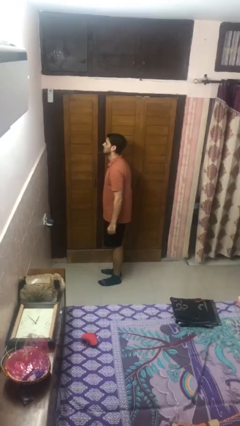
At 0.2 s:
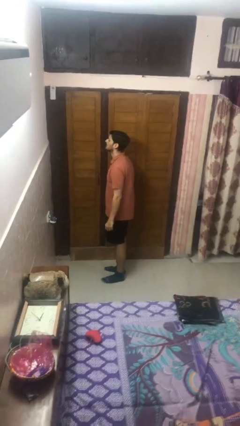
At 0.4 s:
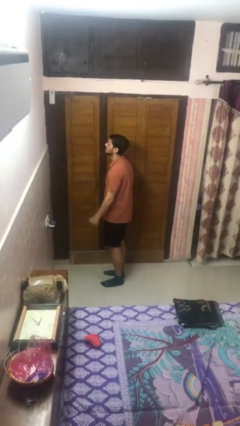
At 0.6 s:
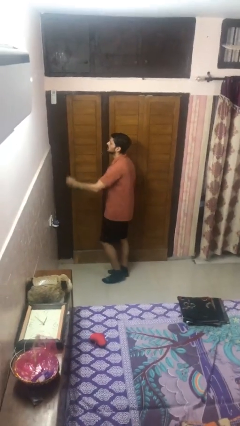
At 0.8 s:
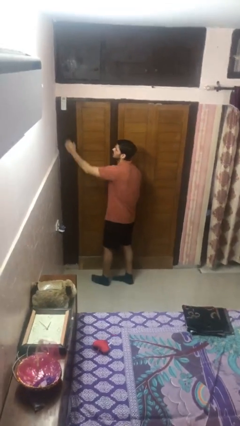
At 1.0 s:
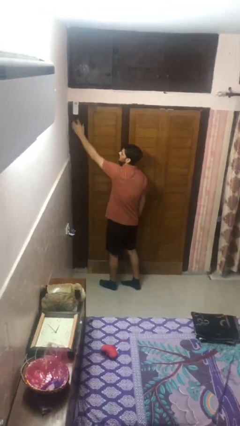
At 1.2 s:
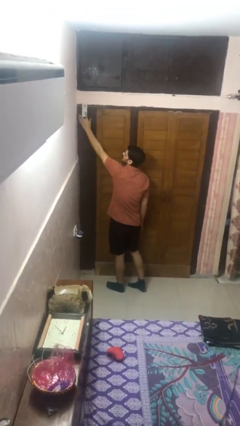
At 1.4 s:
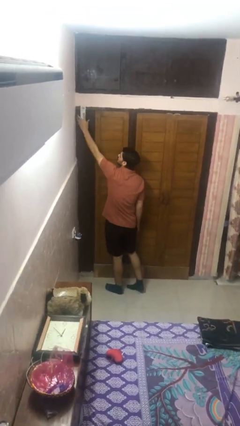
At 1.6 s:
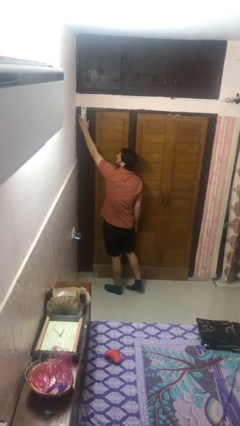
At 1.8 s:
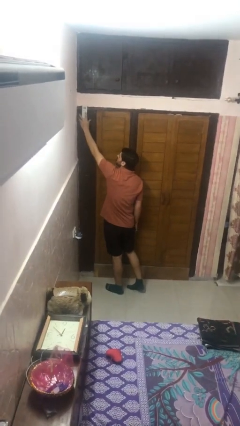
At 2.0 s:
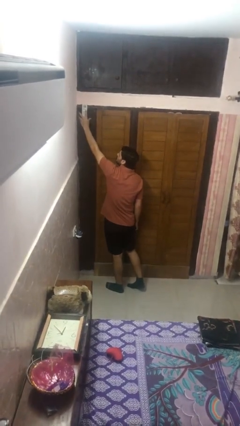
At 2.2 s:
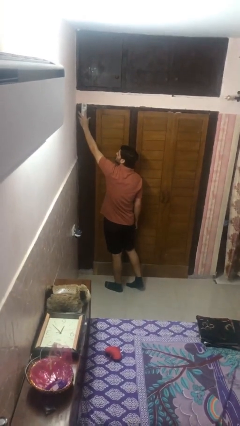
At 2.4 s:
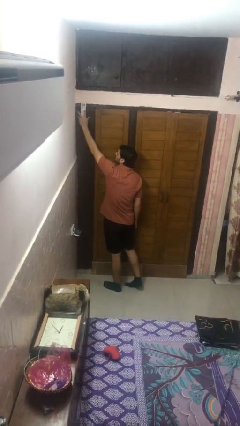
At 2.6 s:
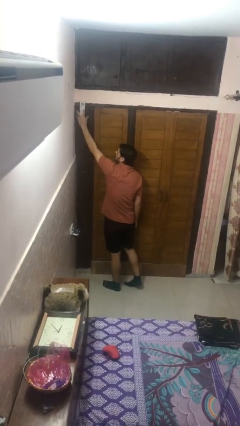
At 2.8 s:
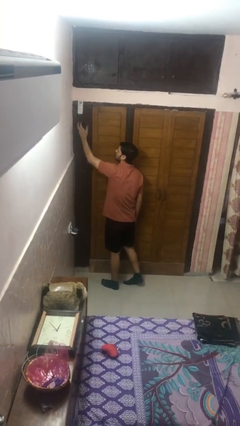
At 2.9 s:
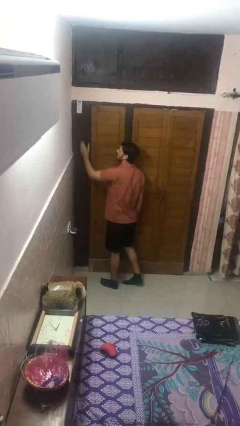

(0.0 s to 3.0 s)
person adjusts thermostat

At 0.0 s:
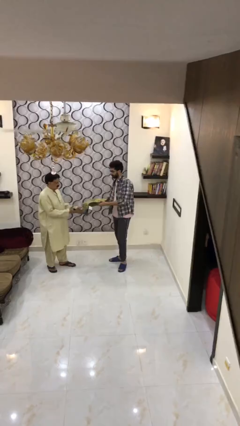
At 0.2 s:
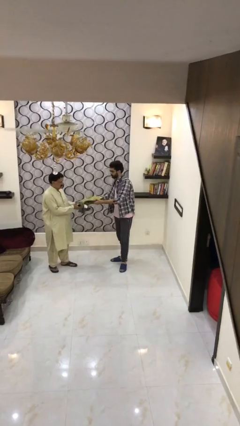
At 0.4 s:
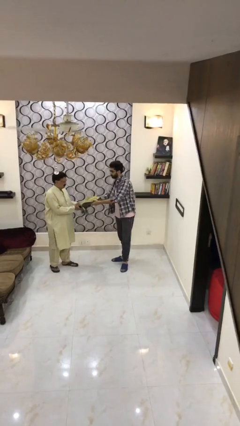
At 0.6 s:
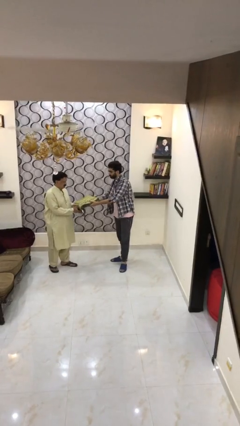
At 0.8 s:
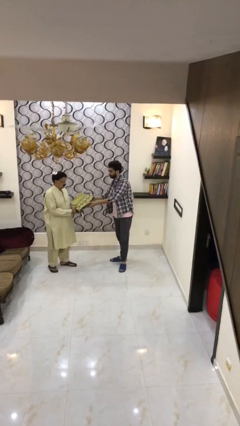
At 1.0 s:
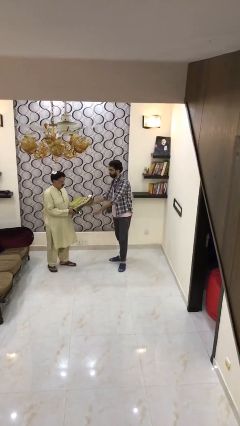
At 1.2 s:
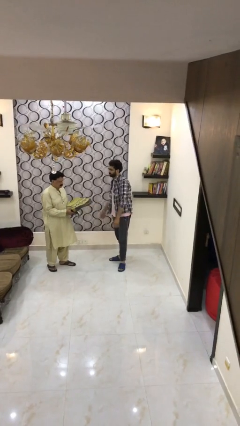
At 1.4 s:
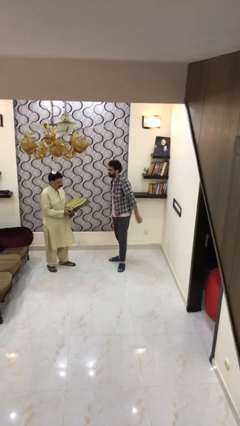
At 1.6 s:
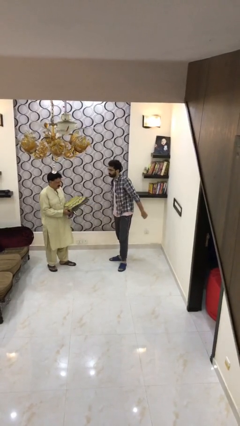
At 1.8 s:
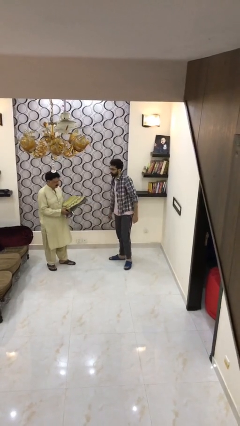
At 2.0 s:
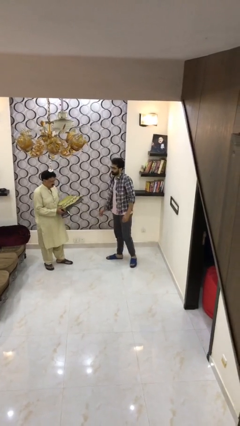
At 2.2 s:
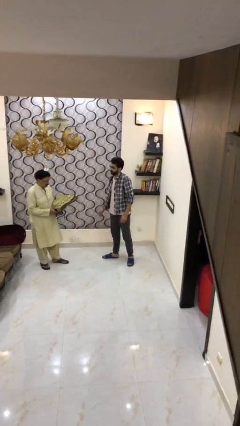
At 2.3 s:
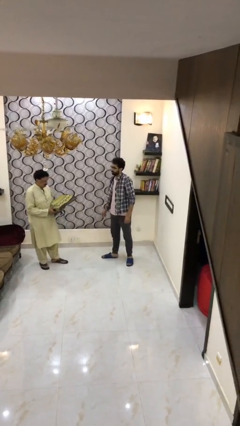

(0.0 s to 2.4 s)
person transfers object to person

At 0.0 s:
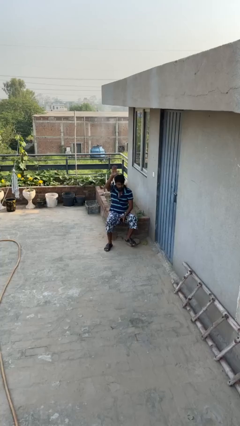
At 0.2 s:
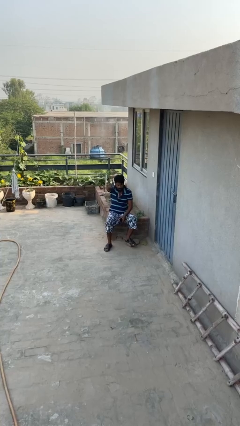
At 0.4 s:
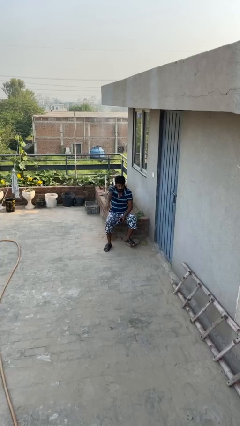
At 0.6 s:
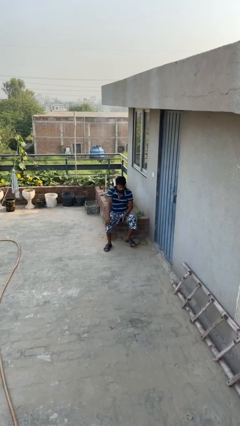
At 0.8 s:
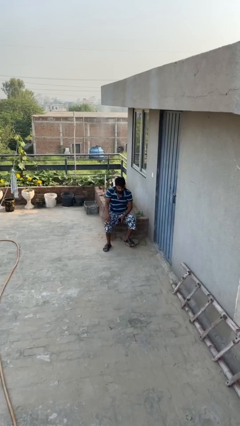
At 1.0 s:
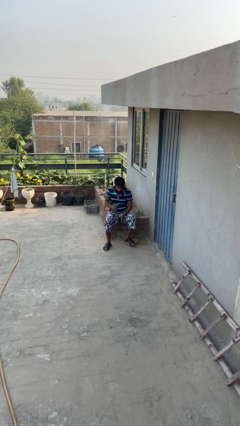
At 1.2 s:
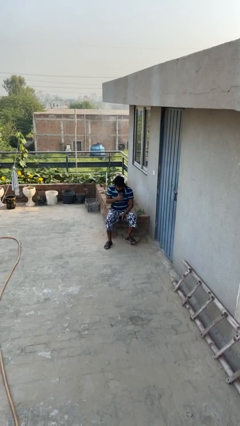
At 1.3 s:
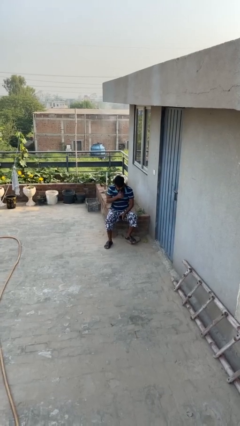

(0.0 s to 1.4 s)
person gestures lower hand

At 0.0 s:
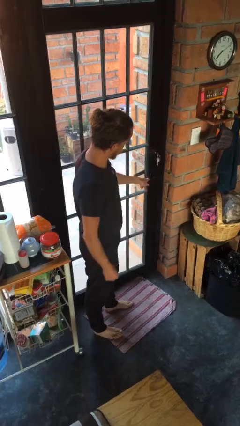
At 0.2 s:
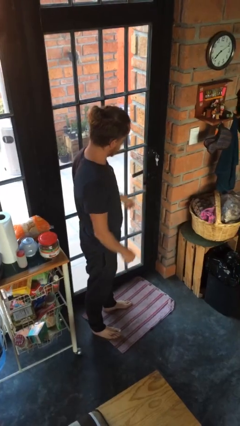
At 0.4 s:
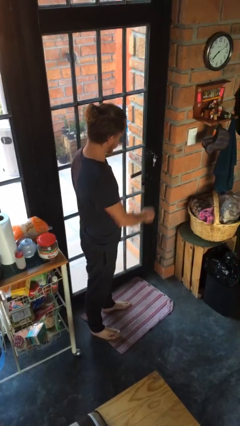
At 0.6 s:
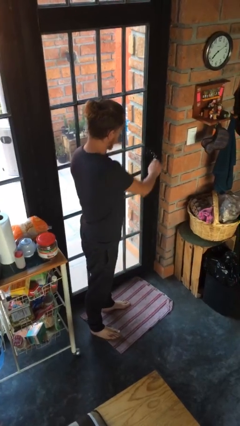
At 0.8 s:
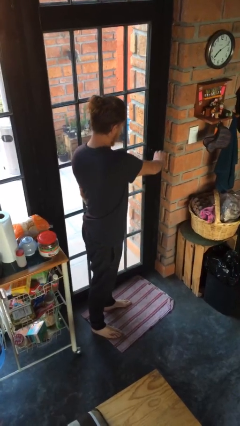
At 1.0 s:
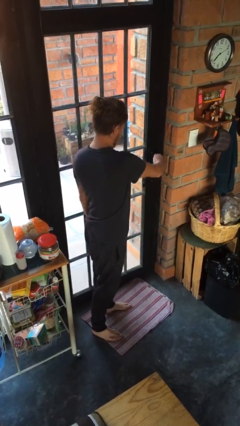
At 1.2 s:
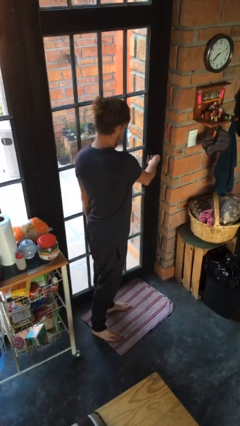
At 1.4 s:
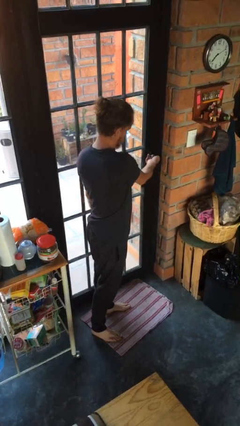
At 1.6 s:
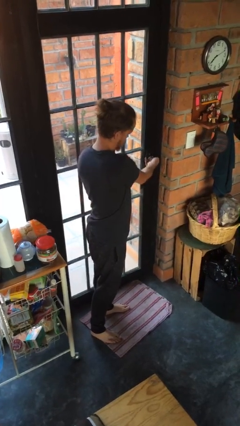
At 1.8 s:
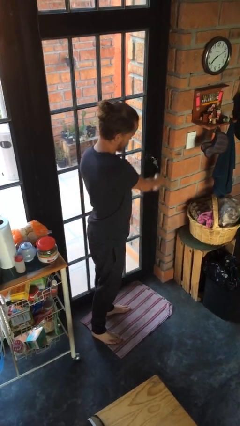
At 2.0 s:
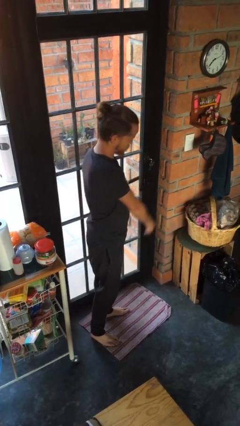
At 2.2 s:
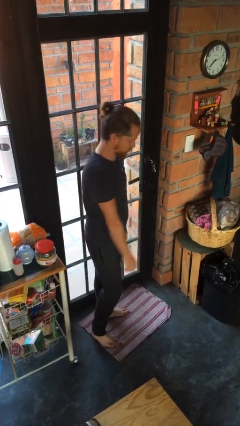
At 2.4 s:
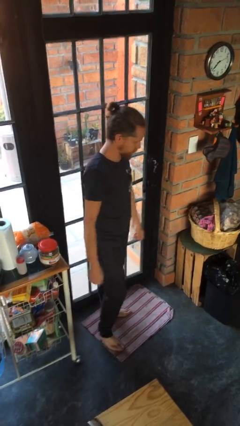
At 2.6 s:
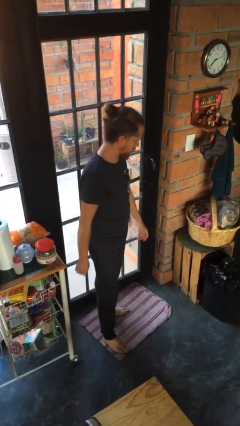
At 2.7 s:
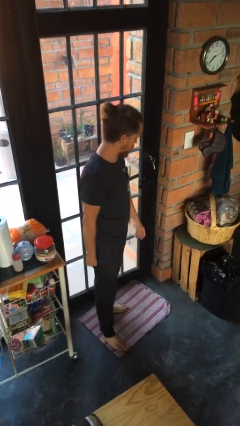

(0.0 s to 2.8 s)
person locks door with keys

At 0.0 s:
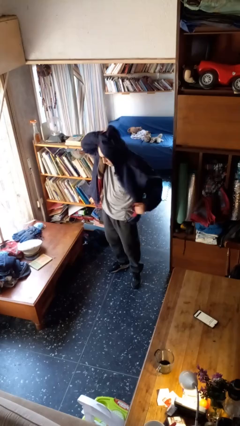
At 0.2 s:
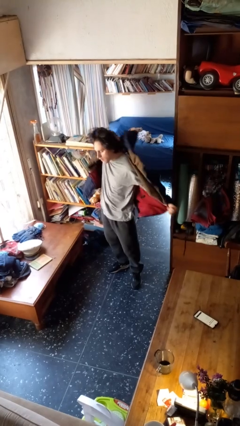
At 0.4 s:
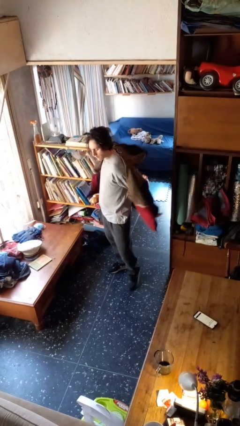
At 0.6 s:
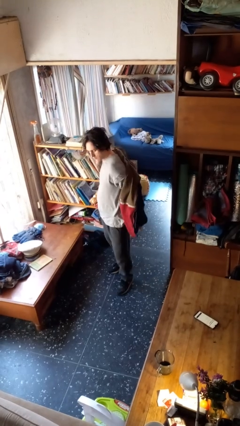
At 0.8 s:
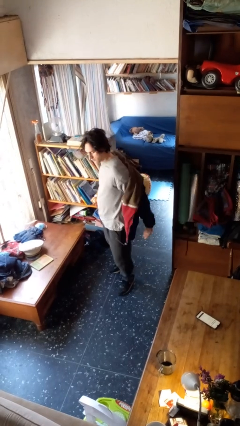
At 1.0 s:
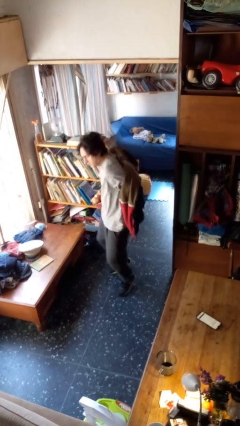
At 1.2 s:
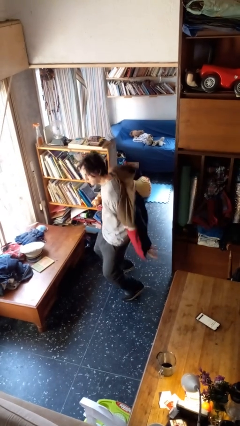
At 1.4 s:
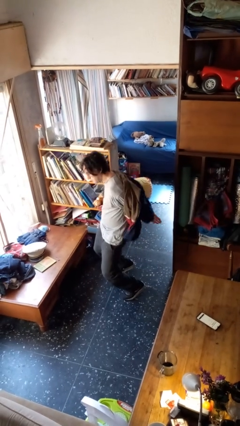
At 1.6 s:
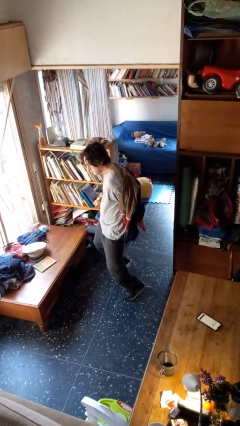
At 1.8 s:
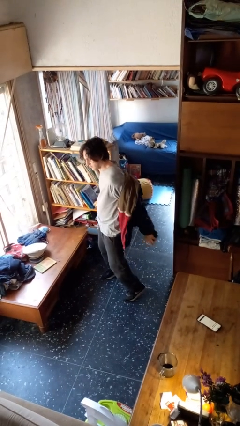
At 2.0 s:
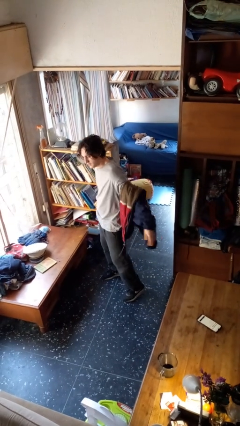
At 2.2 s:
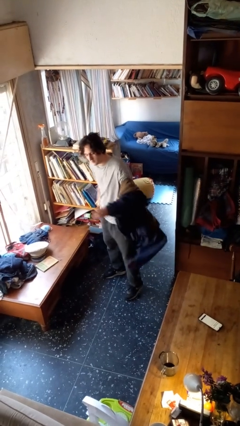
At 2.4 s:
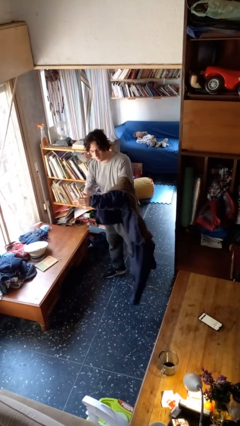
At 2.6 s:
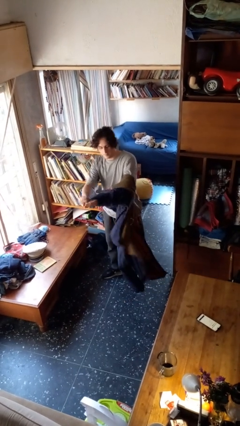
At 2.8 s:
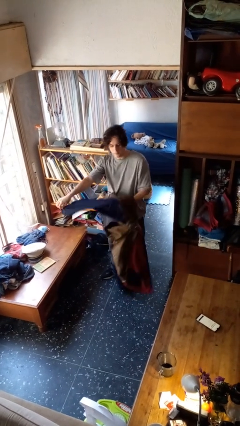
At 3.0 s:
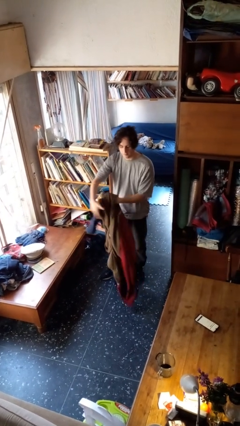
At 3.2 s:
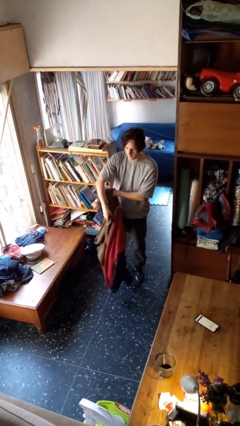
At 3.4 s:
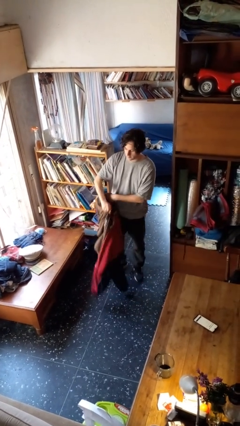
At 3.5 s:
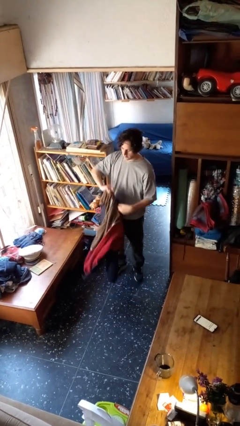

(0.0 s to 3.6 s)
person takes off hoodie

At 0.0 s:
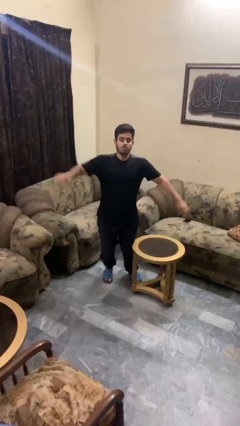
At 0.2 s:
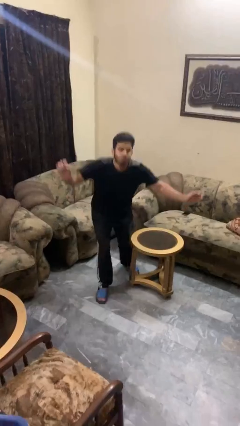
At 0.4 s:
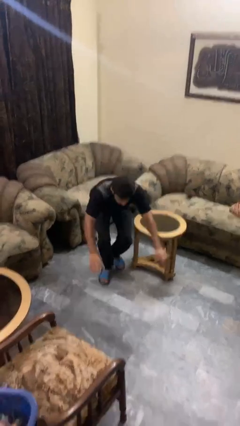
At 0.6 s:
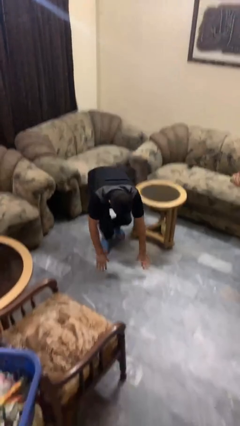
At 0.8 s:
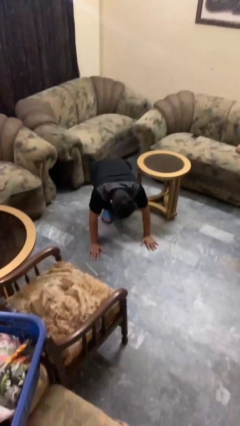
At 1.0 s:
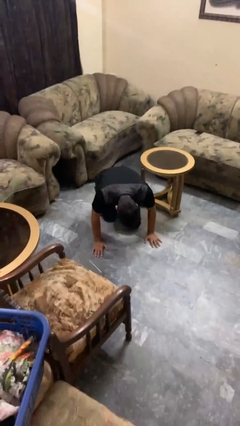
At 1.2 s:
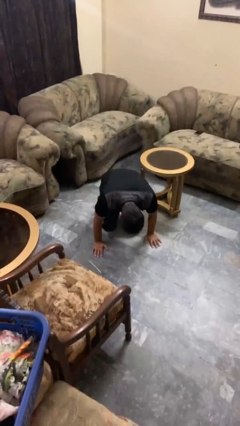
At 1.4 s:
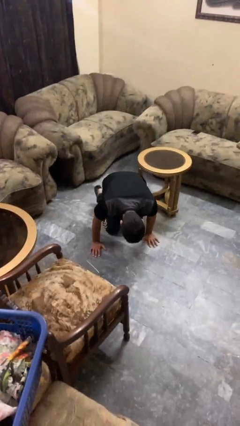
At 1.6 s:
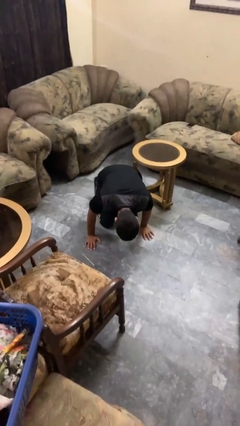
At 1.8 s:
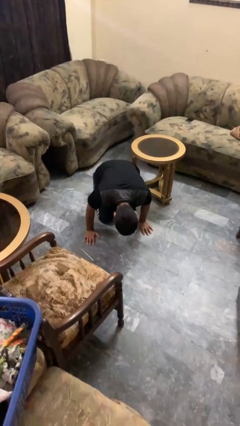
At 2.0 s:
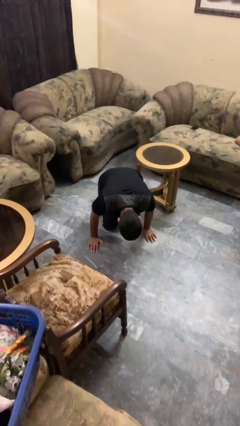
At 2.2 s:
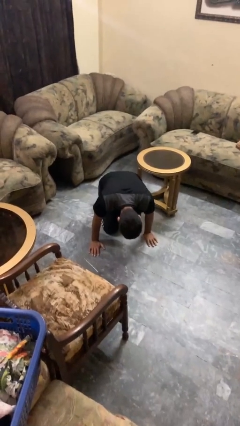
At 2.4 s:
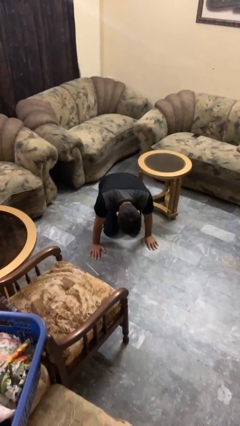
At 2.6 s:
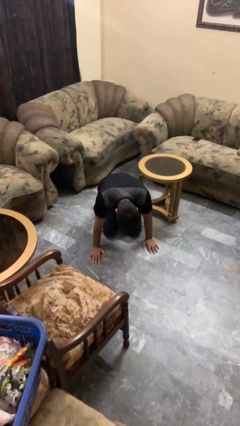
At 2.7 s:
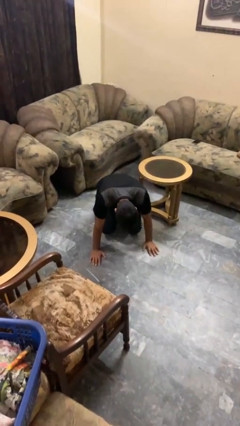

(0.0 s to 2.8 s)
person trips on object on floor

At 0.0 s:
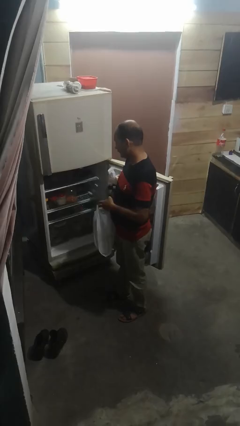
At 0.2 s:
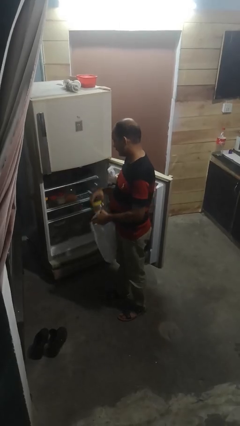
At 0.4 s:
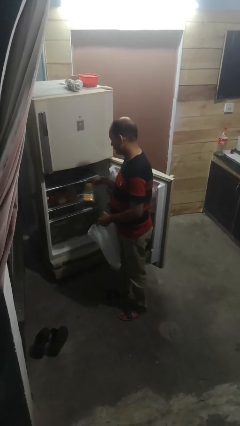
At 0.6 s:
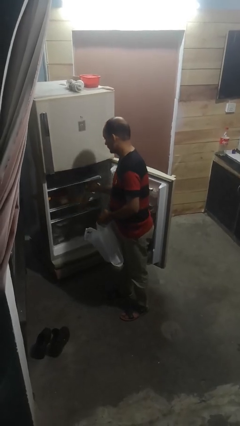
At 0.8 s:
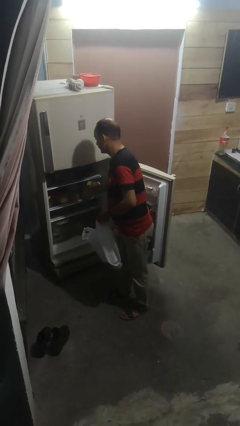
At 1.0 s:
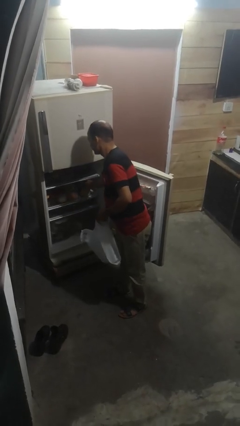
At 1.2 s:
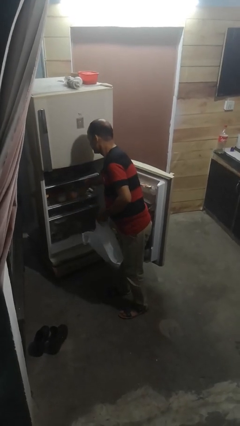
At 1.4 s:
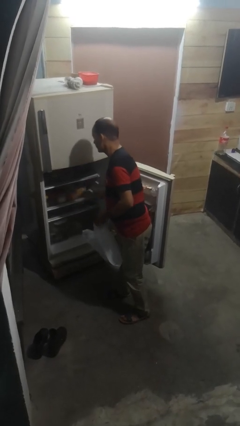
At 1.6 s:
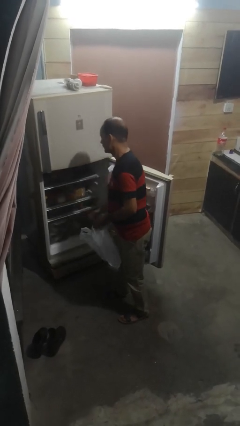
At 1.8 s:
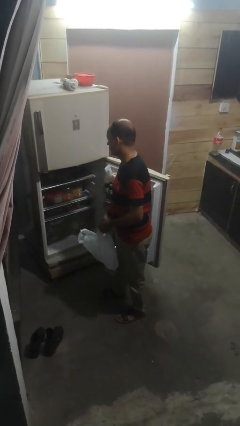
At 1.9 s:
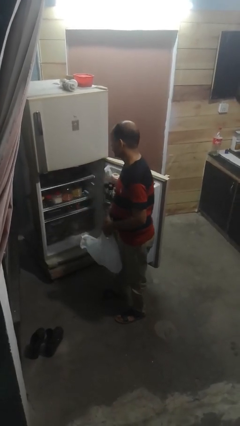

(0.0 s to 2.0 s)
person loads groceries into refrigerator
